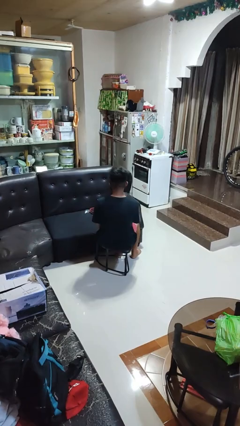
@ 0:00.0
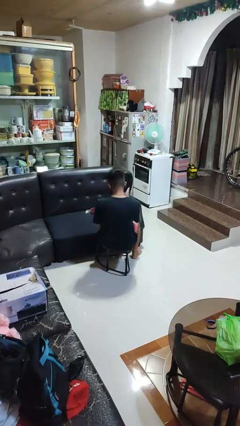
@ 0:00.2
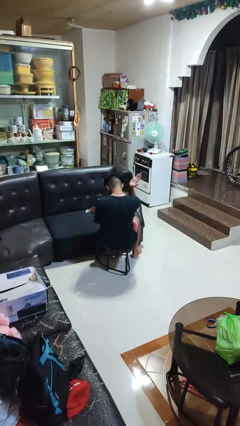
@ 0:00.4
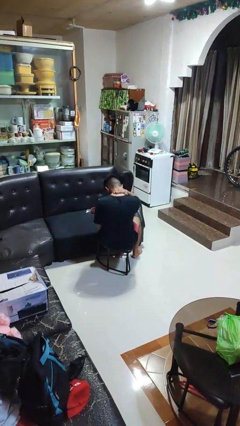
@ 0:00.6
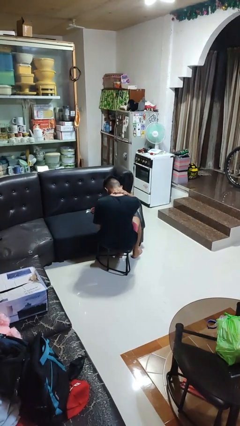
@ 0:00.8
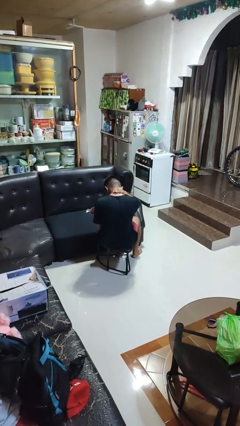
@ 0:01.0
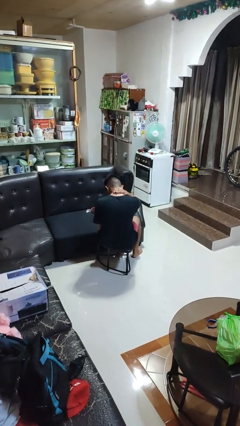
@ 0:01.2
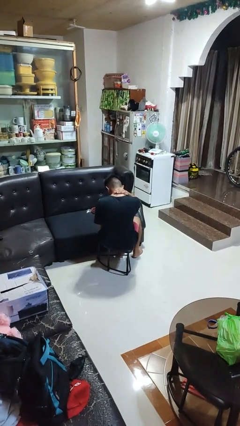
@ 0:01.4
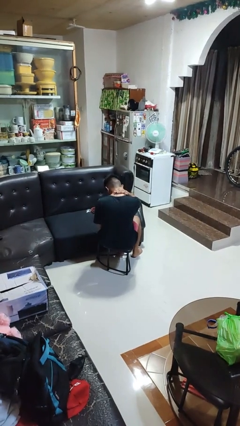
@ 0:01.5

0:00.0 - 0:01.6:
person swats bug

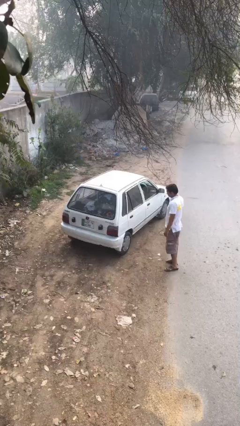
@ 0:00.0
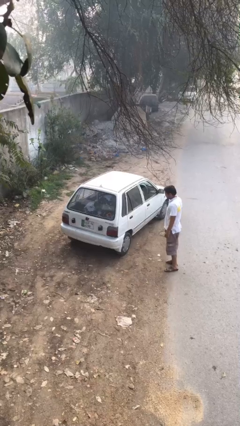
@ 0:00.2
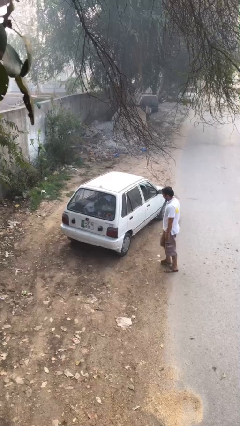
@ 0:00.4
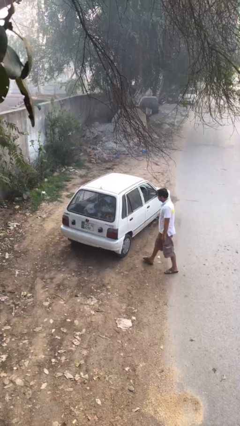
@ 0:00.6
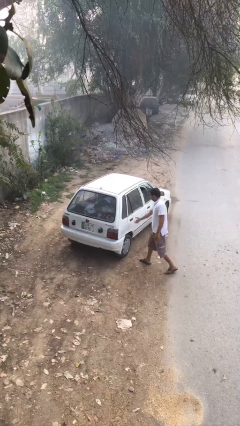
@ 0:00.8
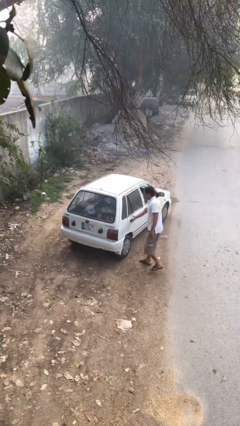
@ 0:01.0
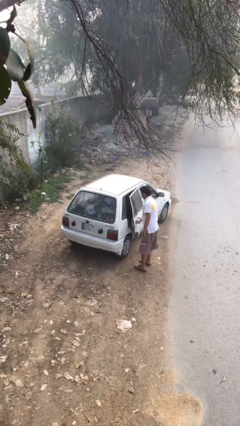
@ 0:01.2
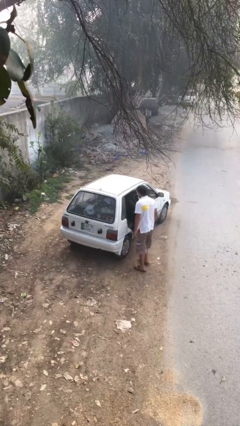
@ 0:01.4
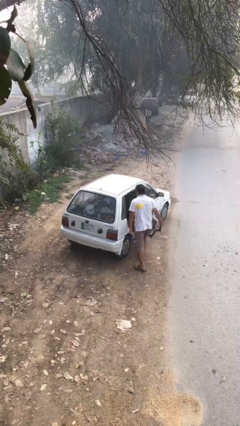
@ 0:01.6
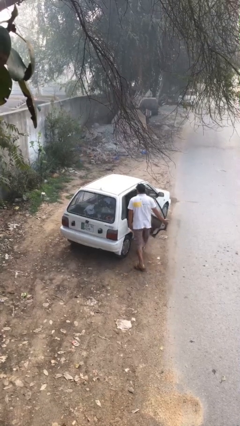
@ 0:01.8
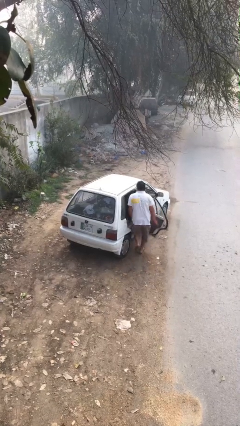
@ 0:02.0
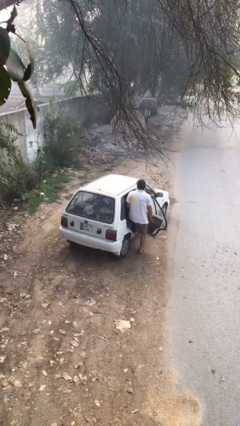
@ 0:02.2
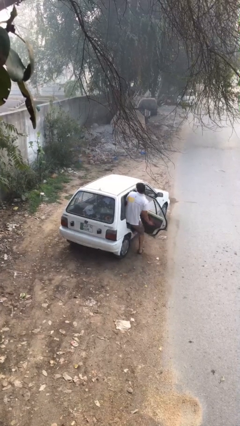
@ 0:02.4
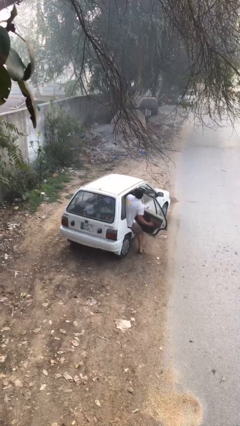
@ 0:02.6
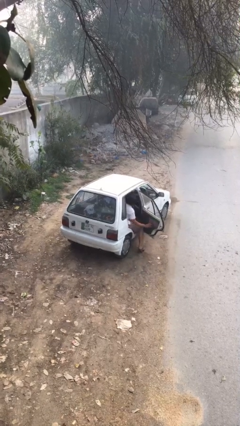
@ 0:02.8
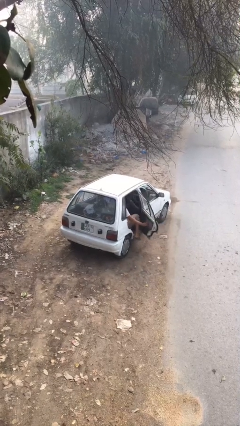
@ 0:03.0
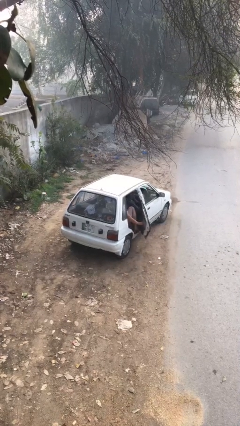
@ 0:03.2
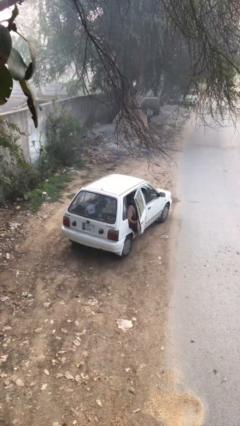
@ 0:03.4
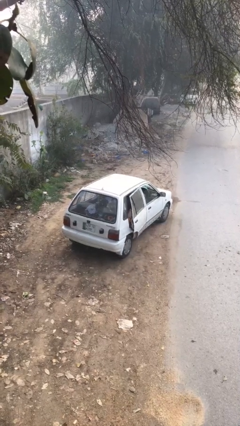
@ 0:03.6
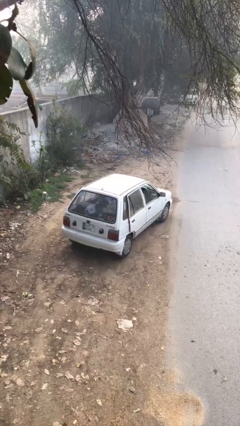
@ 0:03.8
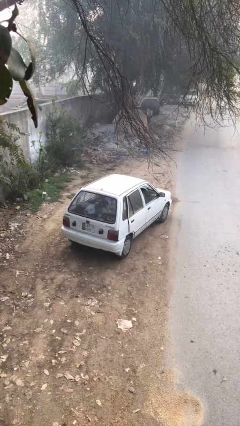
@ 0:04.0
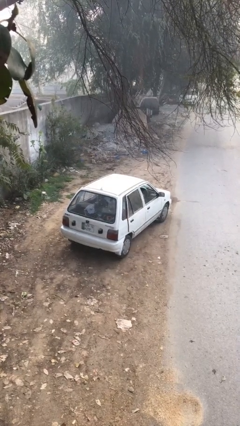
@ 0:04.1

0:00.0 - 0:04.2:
car picks up person

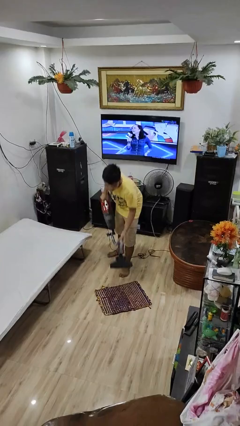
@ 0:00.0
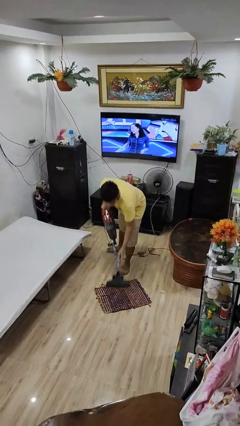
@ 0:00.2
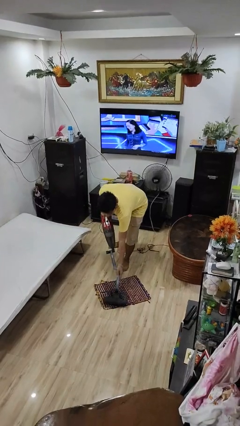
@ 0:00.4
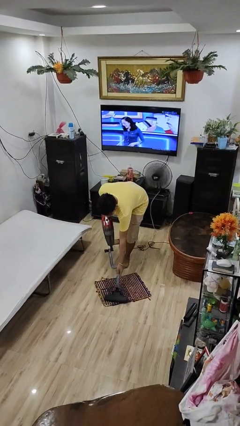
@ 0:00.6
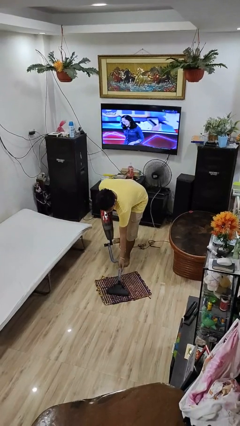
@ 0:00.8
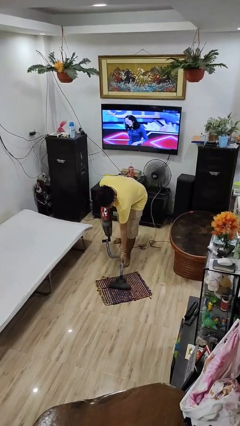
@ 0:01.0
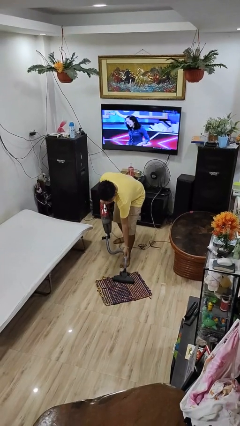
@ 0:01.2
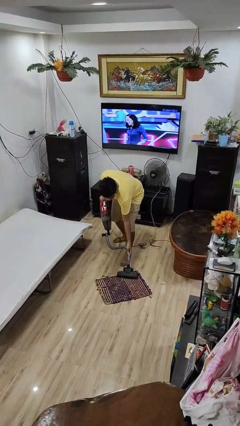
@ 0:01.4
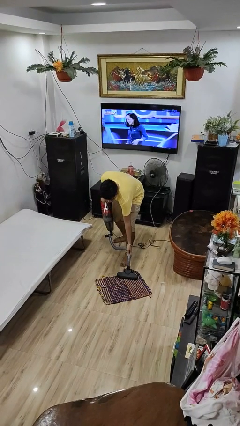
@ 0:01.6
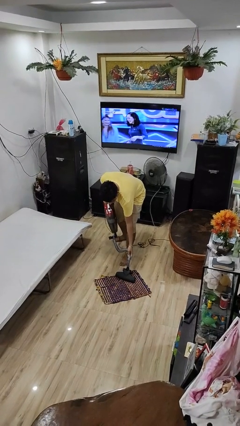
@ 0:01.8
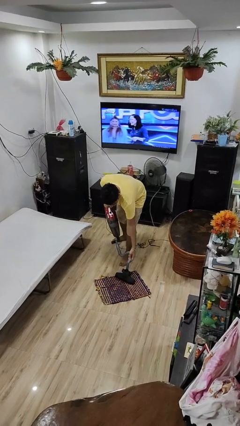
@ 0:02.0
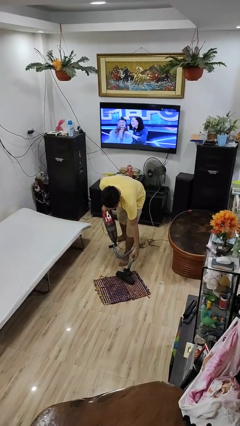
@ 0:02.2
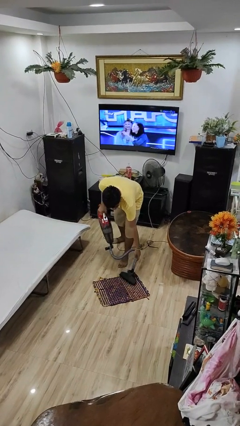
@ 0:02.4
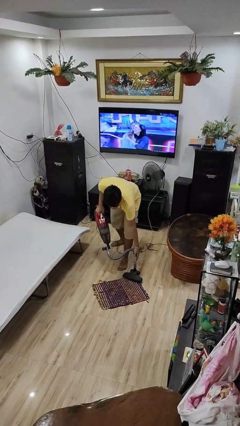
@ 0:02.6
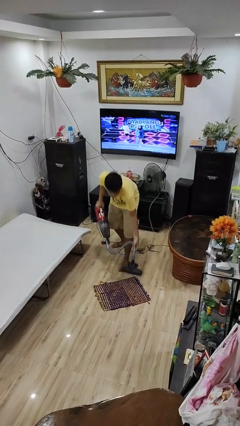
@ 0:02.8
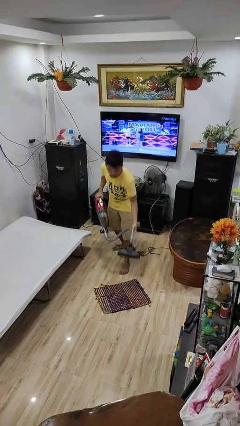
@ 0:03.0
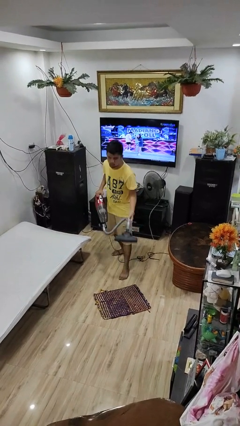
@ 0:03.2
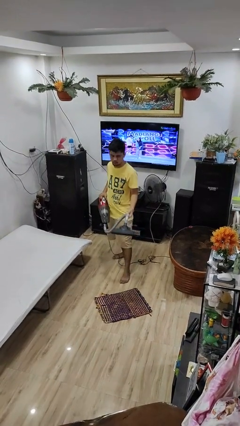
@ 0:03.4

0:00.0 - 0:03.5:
person vacuums carpet

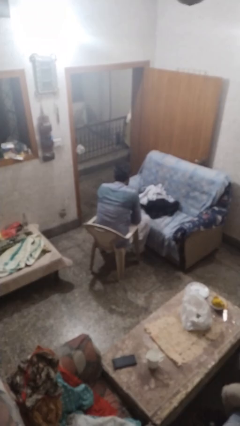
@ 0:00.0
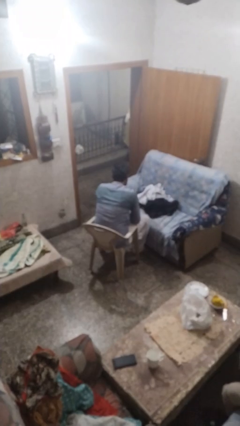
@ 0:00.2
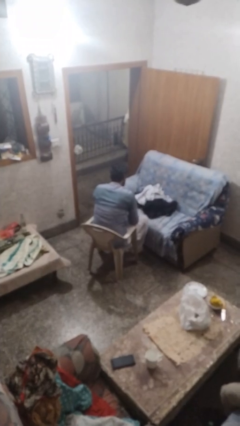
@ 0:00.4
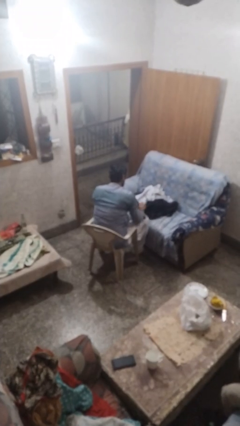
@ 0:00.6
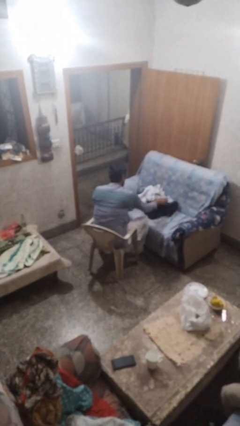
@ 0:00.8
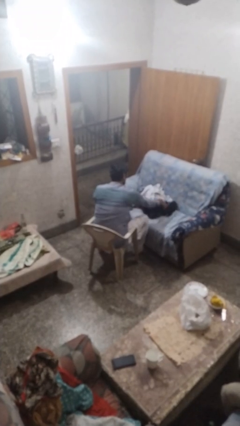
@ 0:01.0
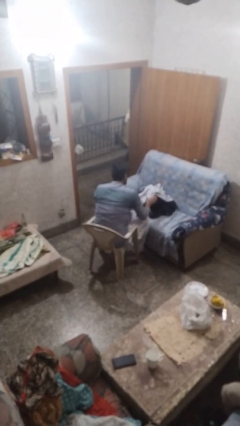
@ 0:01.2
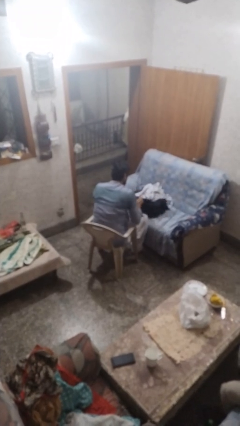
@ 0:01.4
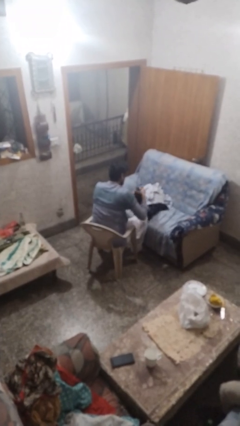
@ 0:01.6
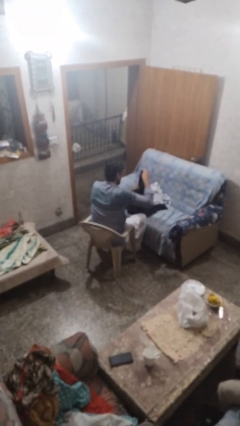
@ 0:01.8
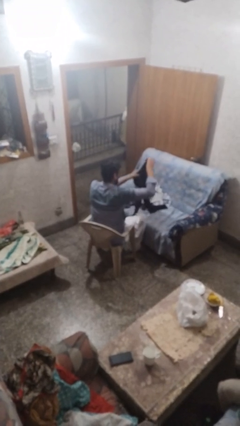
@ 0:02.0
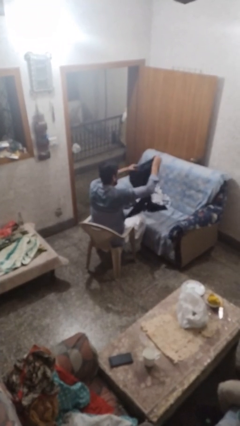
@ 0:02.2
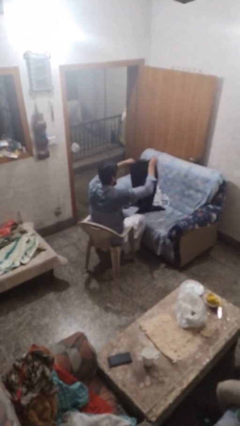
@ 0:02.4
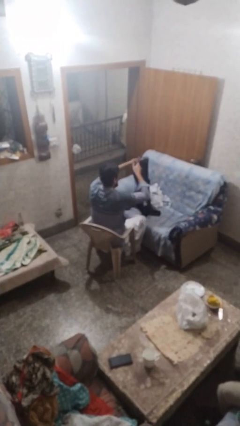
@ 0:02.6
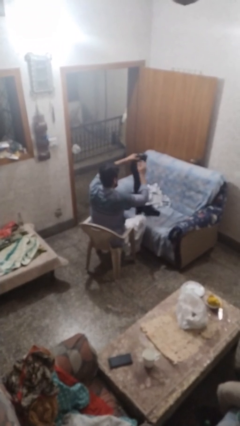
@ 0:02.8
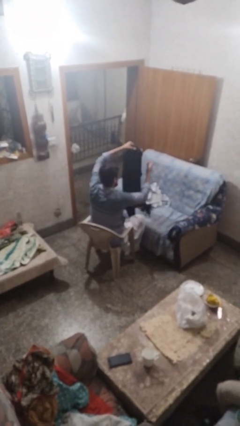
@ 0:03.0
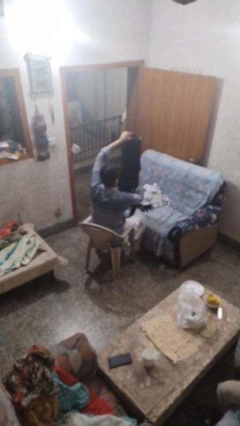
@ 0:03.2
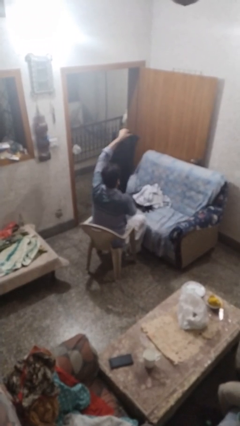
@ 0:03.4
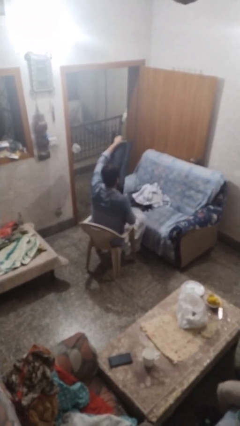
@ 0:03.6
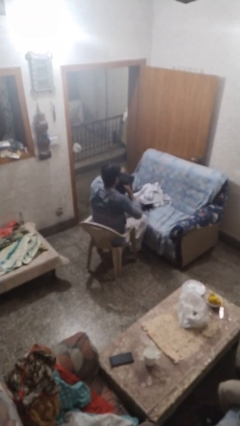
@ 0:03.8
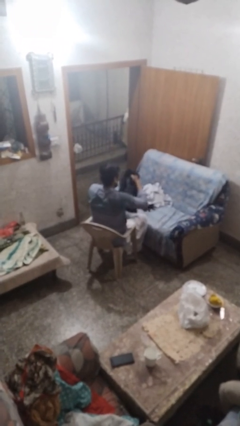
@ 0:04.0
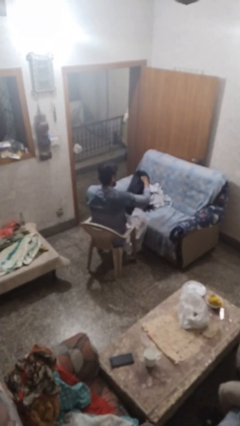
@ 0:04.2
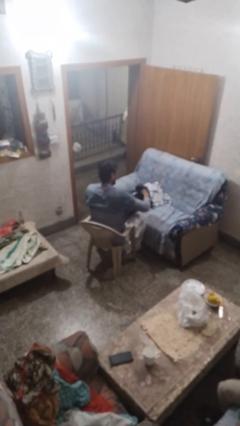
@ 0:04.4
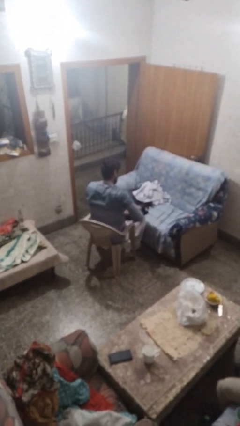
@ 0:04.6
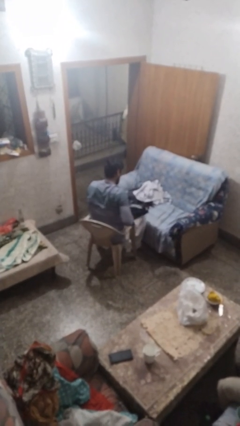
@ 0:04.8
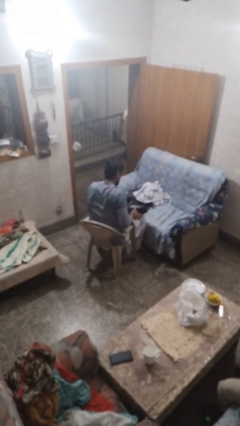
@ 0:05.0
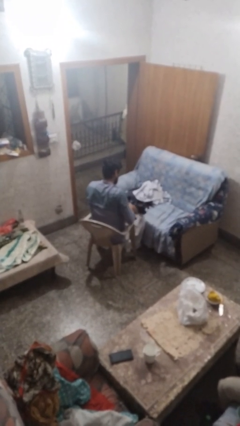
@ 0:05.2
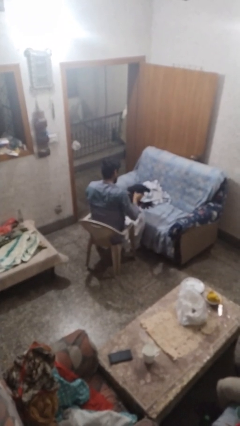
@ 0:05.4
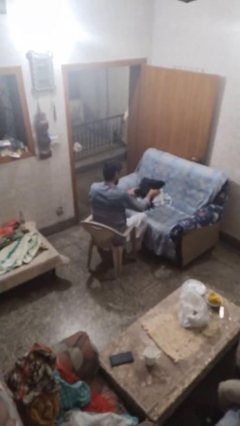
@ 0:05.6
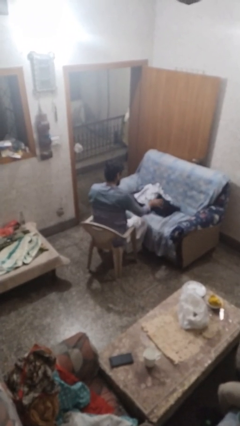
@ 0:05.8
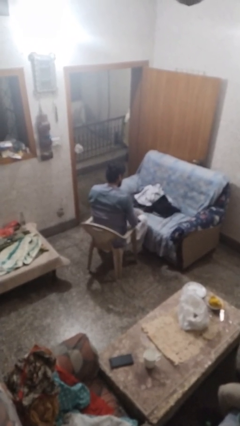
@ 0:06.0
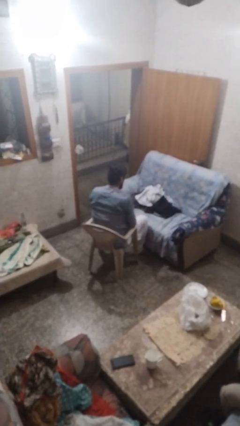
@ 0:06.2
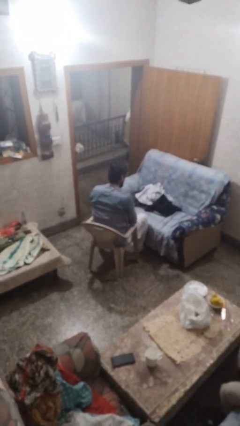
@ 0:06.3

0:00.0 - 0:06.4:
person folds pants

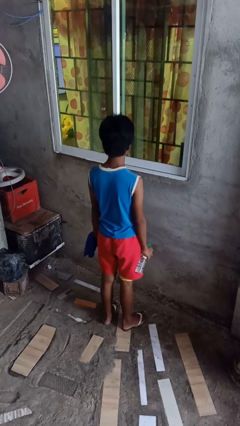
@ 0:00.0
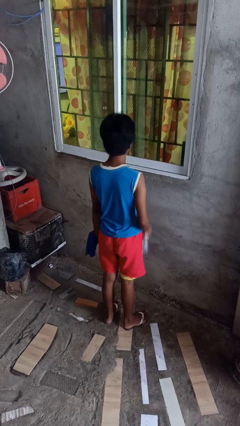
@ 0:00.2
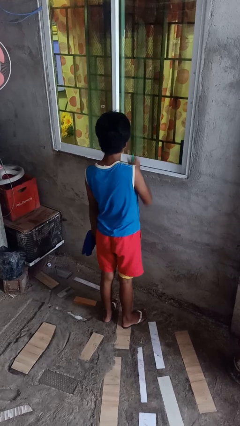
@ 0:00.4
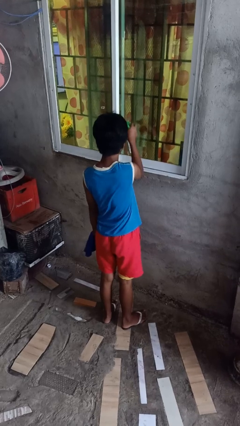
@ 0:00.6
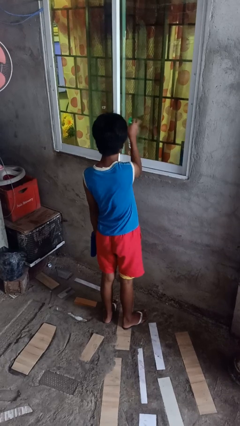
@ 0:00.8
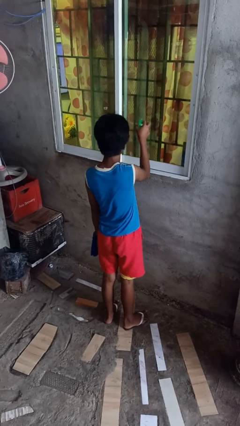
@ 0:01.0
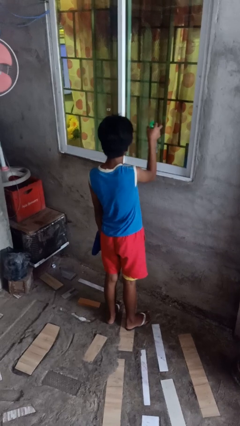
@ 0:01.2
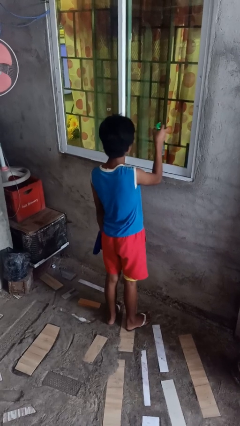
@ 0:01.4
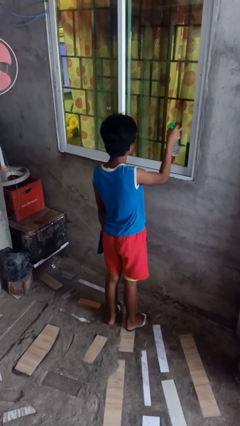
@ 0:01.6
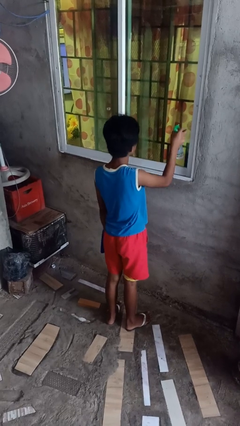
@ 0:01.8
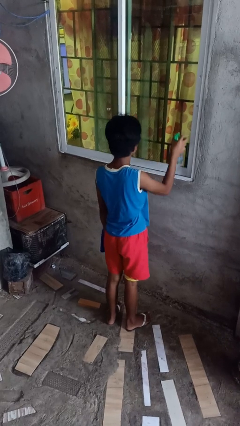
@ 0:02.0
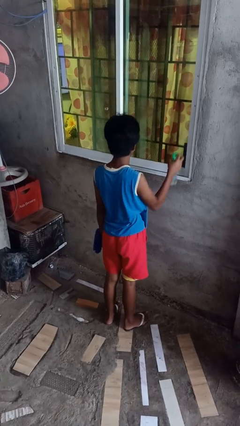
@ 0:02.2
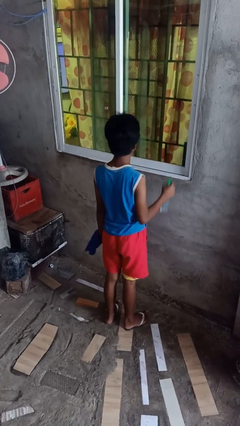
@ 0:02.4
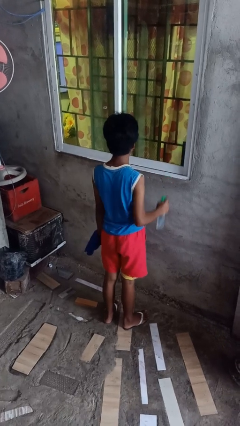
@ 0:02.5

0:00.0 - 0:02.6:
person sprays from bottle
